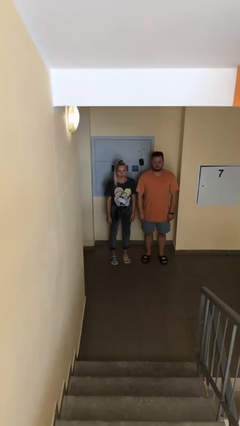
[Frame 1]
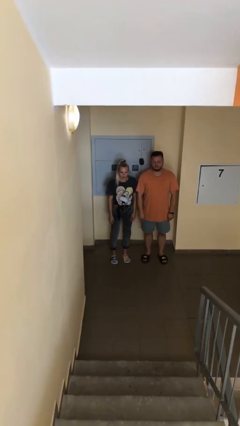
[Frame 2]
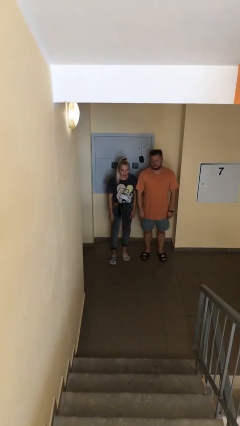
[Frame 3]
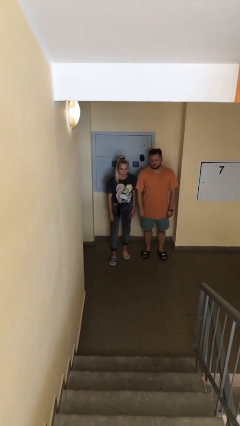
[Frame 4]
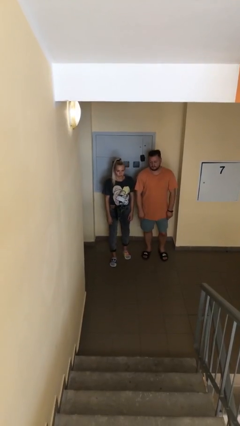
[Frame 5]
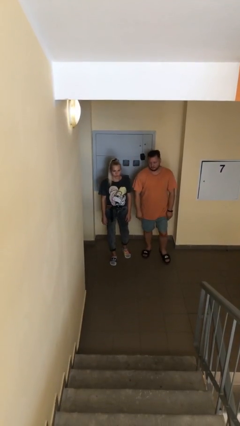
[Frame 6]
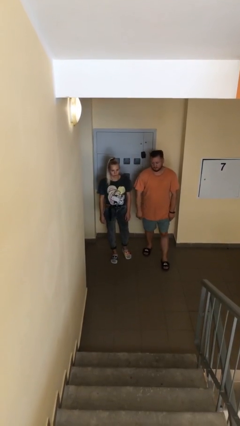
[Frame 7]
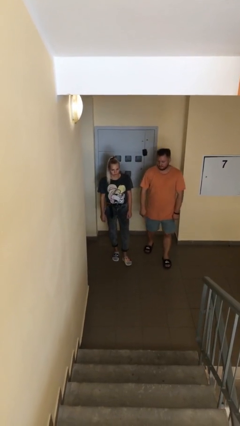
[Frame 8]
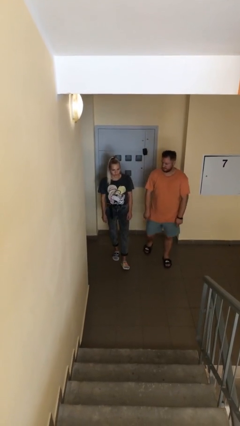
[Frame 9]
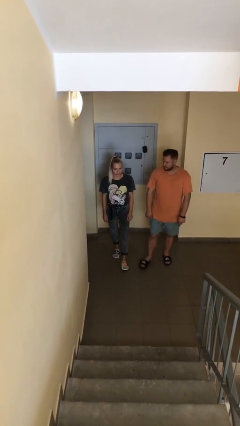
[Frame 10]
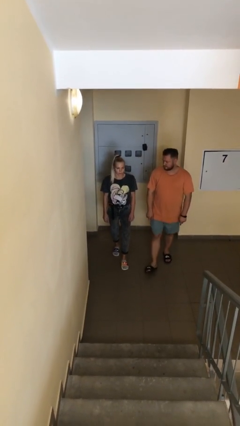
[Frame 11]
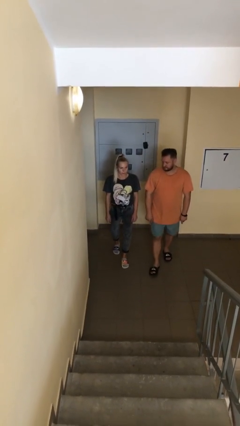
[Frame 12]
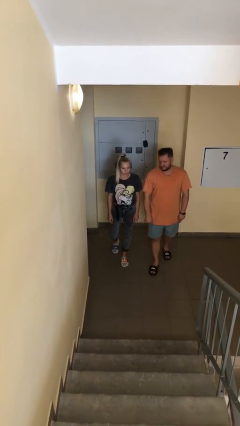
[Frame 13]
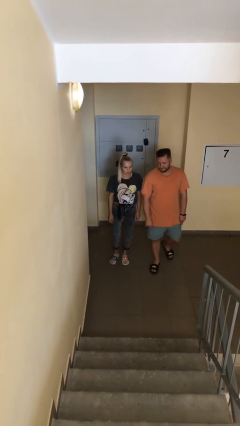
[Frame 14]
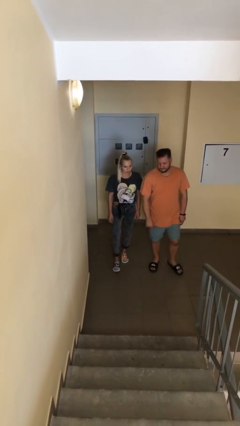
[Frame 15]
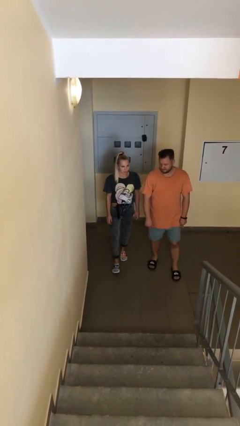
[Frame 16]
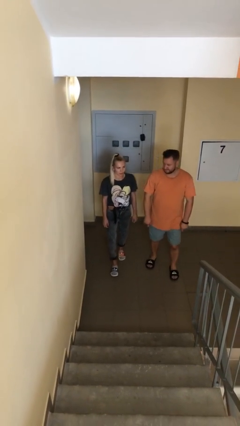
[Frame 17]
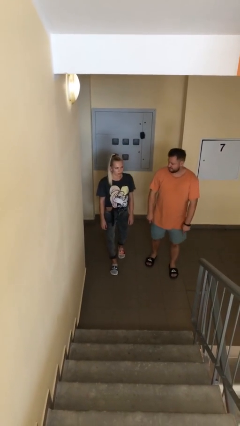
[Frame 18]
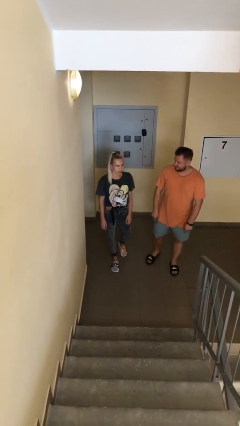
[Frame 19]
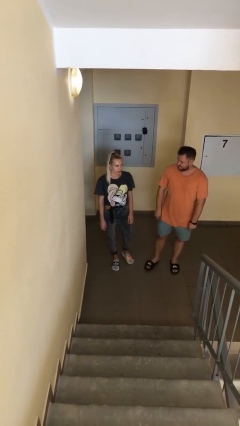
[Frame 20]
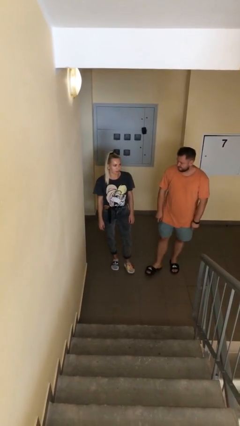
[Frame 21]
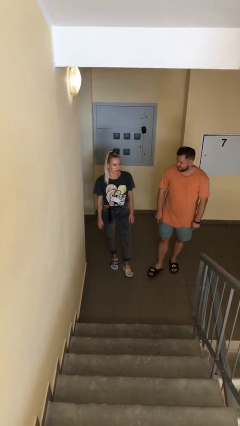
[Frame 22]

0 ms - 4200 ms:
person talks to person

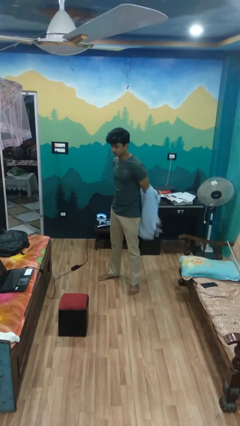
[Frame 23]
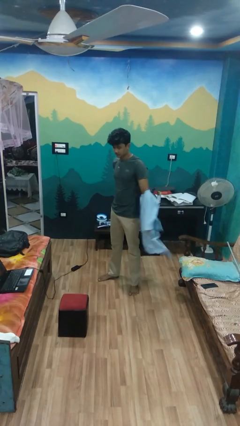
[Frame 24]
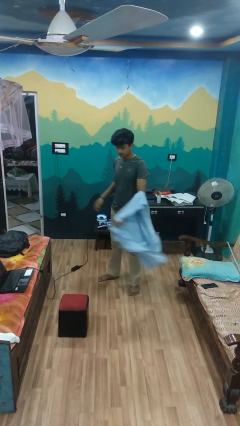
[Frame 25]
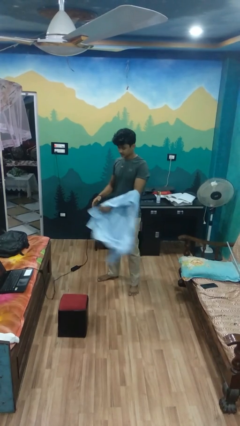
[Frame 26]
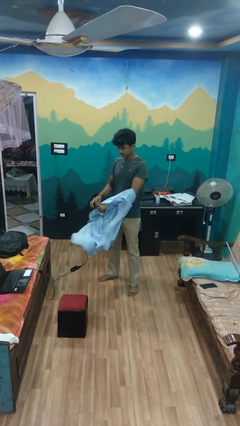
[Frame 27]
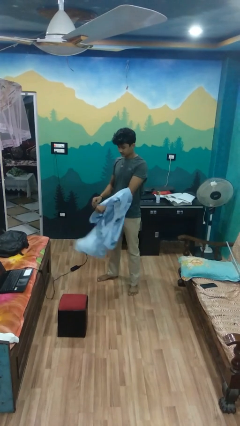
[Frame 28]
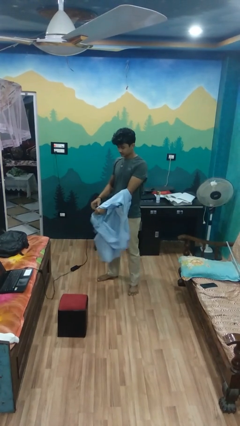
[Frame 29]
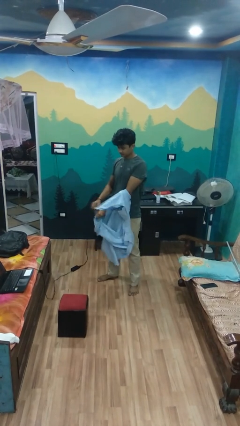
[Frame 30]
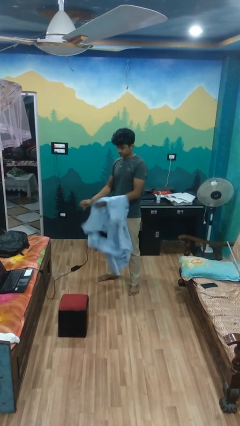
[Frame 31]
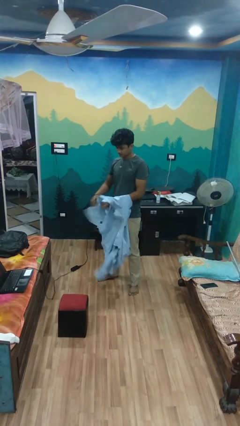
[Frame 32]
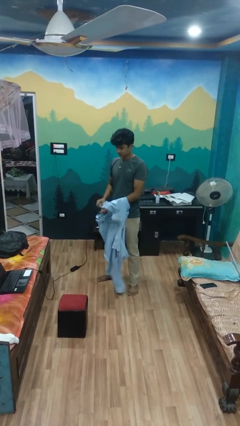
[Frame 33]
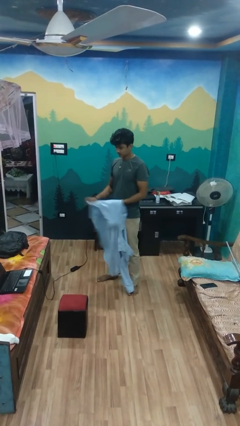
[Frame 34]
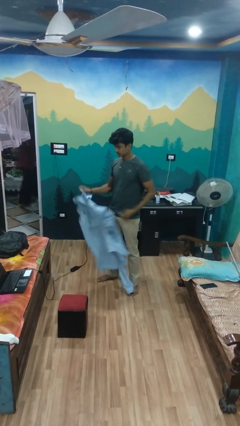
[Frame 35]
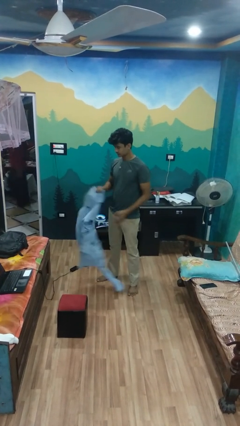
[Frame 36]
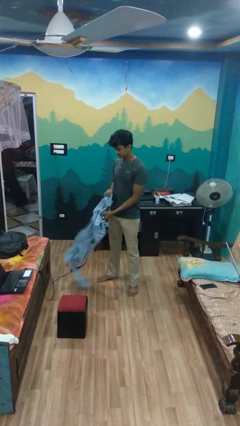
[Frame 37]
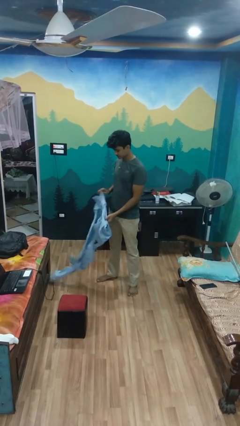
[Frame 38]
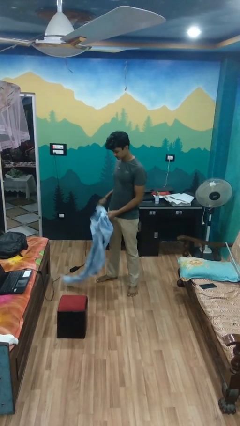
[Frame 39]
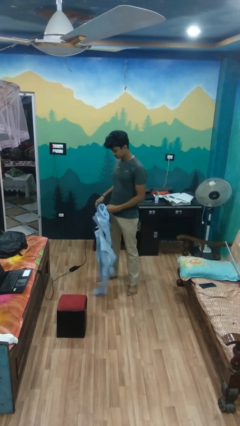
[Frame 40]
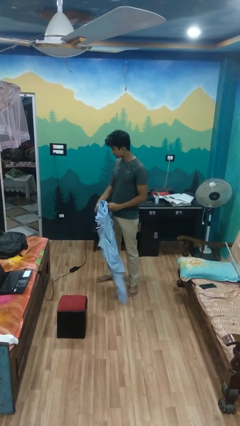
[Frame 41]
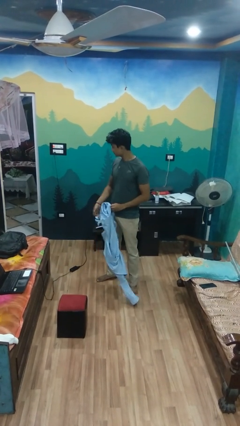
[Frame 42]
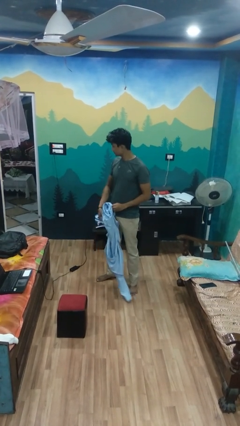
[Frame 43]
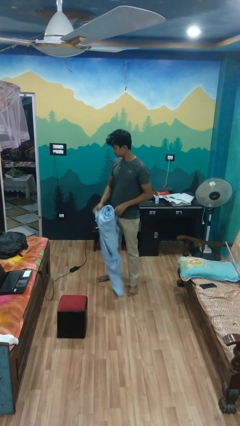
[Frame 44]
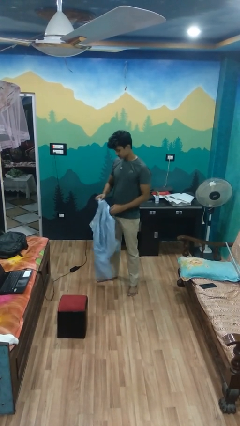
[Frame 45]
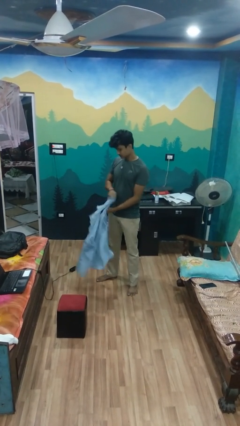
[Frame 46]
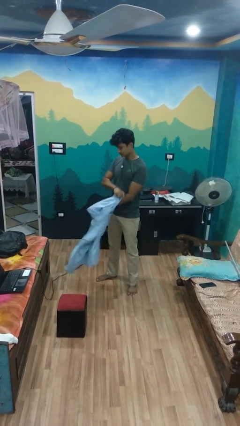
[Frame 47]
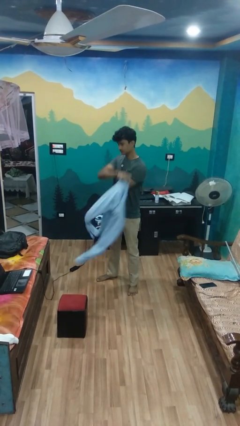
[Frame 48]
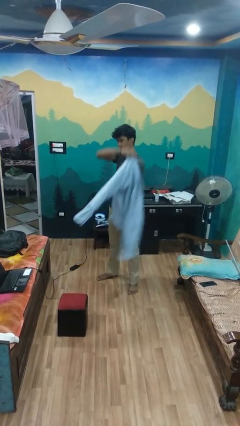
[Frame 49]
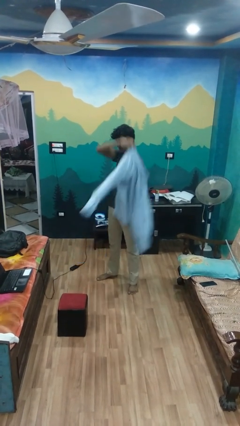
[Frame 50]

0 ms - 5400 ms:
person takes off shirt

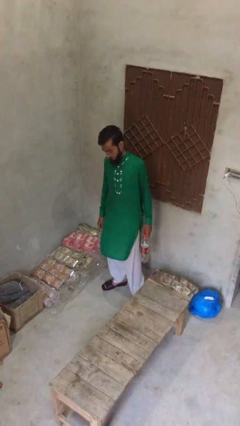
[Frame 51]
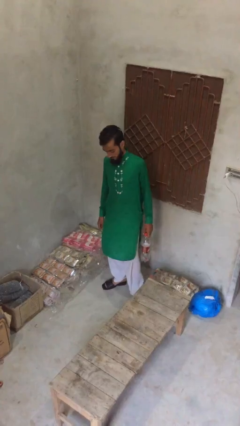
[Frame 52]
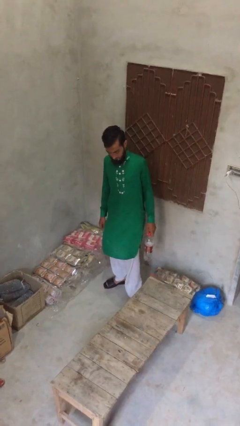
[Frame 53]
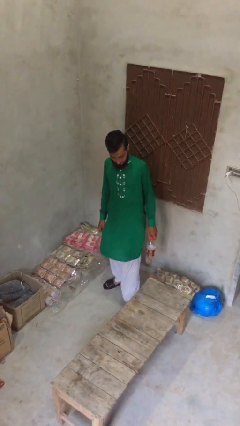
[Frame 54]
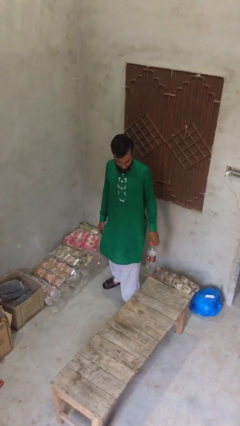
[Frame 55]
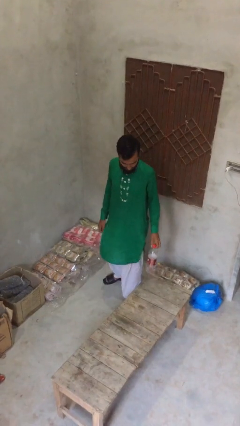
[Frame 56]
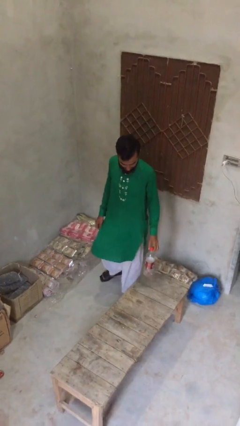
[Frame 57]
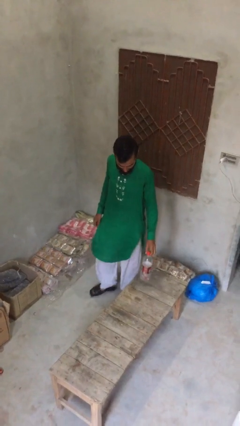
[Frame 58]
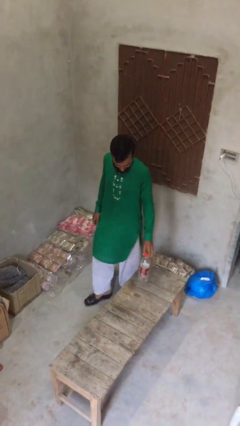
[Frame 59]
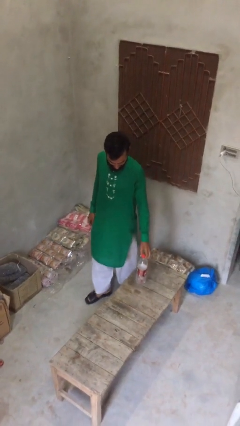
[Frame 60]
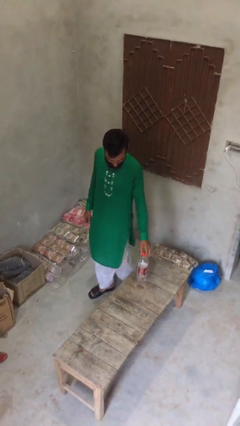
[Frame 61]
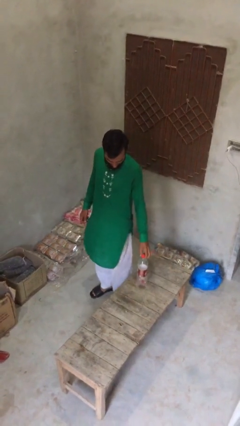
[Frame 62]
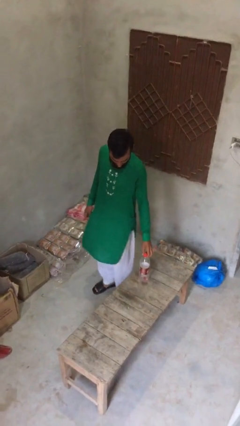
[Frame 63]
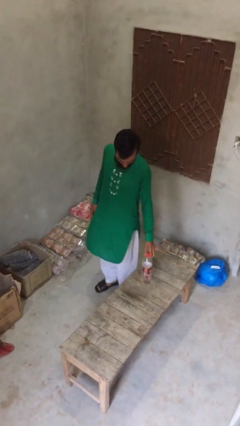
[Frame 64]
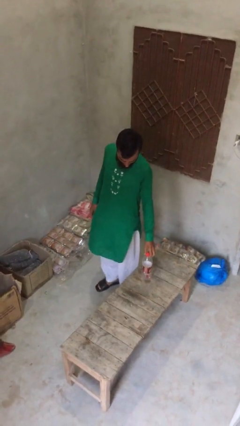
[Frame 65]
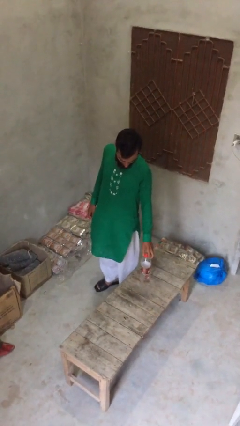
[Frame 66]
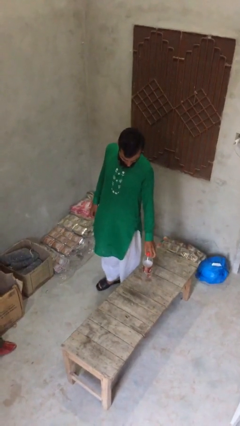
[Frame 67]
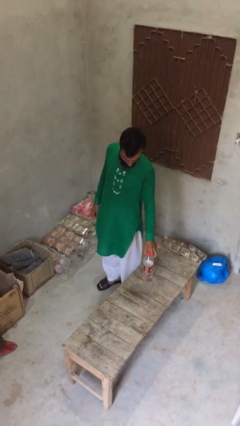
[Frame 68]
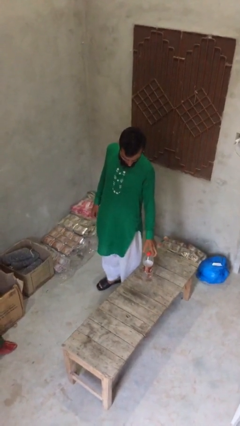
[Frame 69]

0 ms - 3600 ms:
person puts down object on table

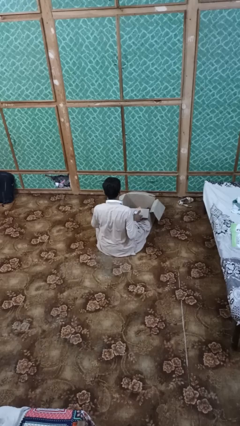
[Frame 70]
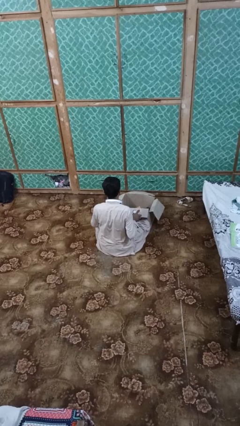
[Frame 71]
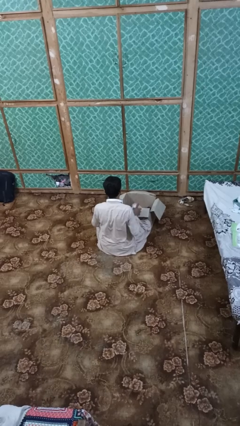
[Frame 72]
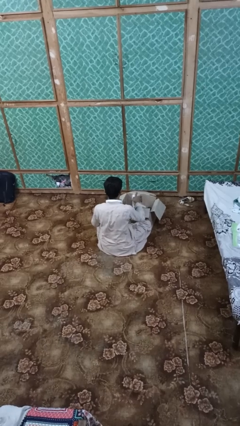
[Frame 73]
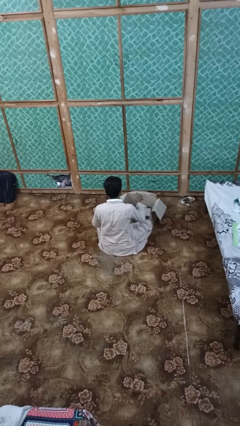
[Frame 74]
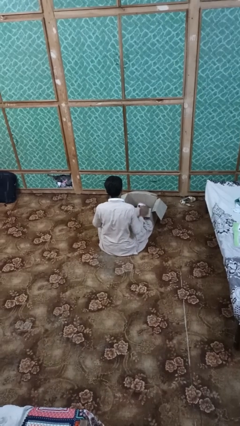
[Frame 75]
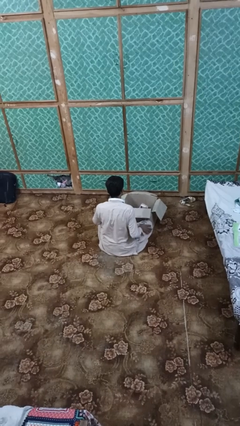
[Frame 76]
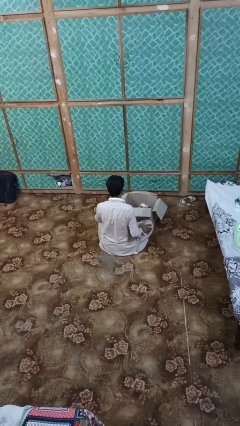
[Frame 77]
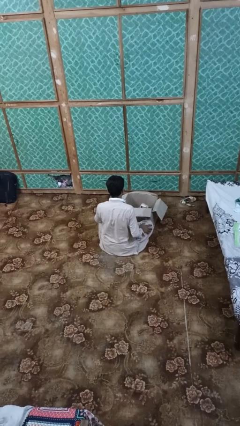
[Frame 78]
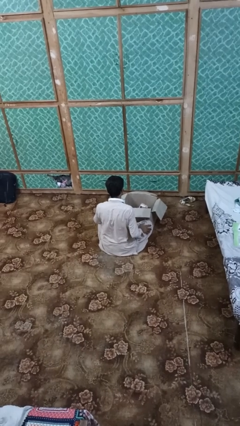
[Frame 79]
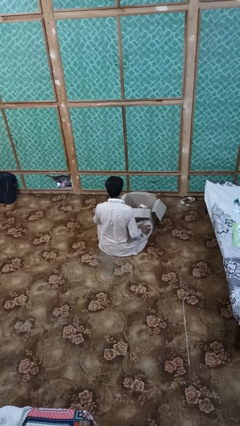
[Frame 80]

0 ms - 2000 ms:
person puts object into box

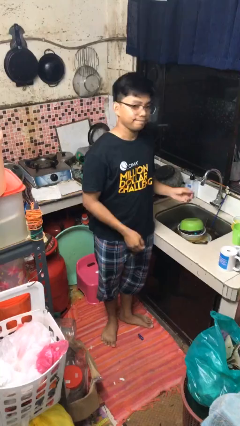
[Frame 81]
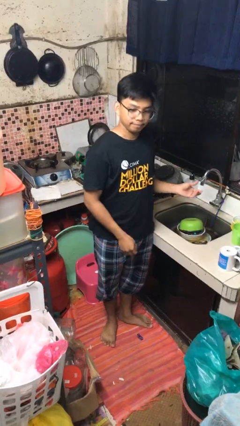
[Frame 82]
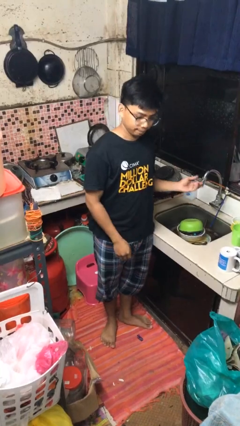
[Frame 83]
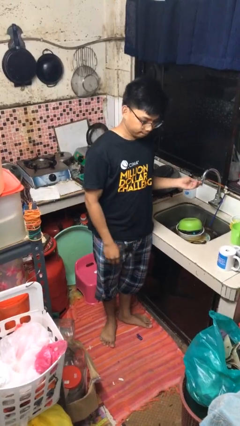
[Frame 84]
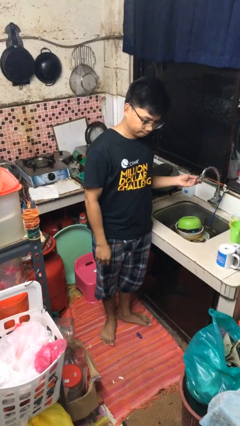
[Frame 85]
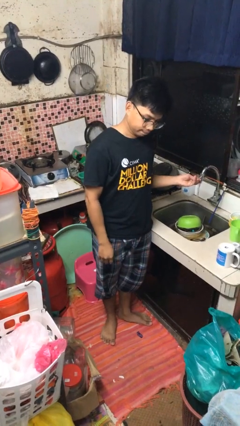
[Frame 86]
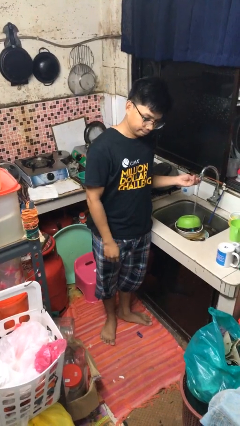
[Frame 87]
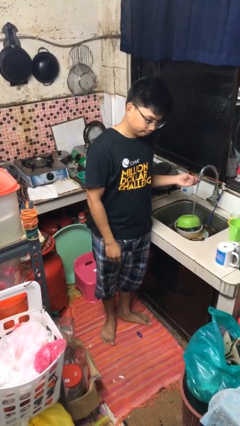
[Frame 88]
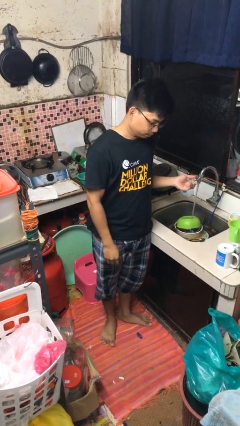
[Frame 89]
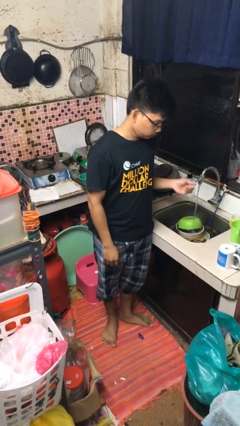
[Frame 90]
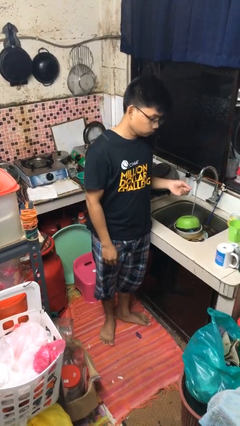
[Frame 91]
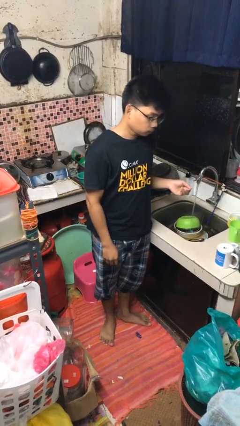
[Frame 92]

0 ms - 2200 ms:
person turns on faucet
